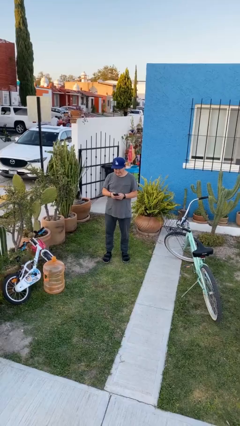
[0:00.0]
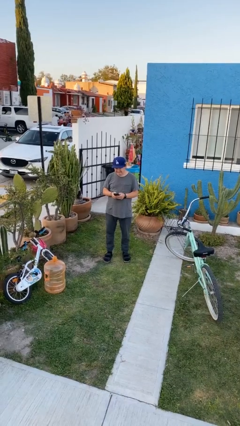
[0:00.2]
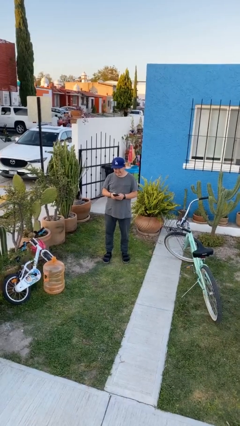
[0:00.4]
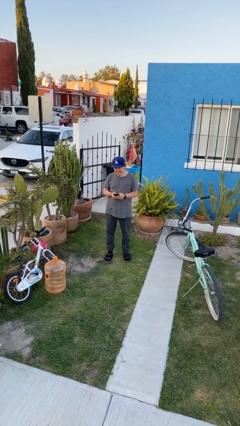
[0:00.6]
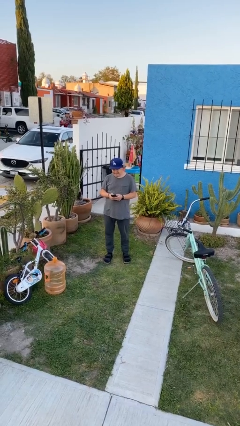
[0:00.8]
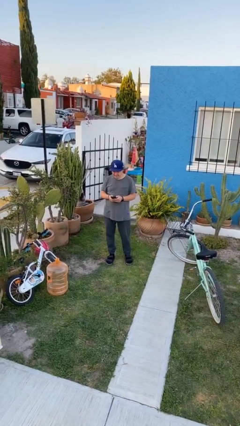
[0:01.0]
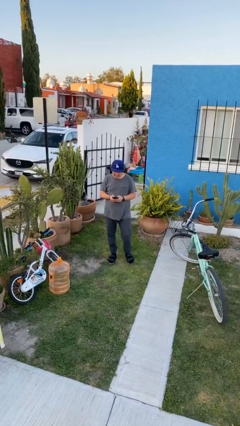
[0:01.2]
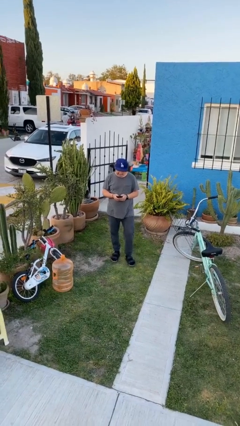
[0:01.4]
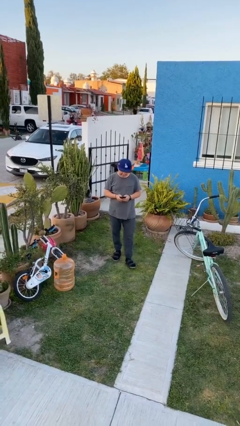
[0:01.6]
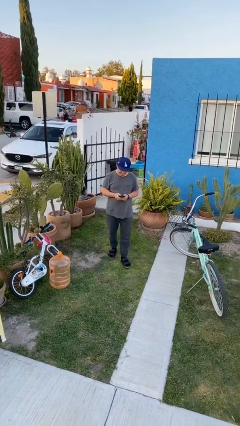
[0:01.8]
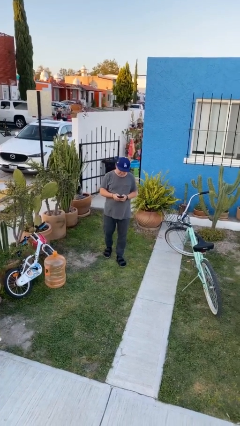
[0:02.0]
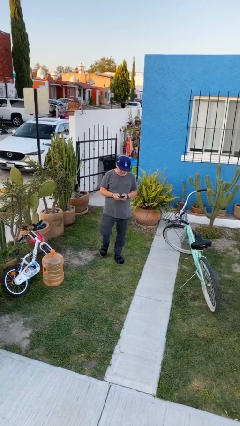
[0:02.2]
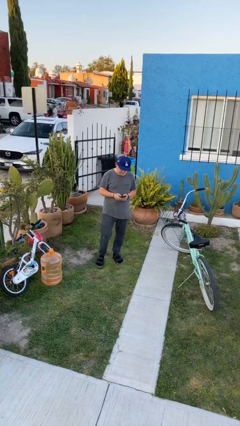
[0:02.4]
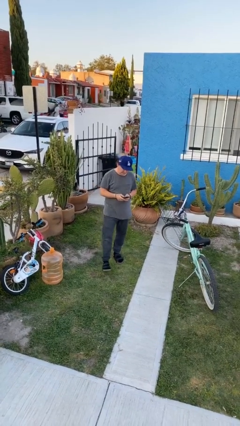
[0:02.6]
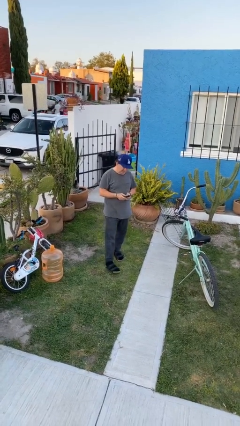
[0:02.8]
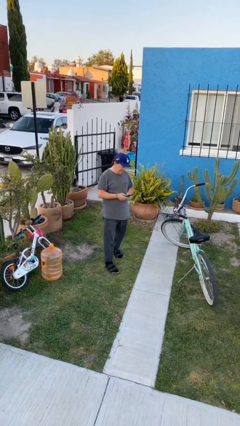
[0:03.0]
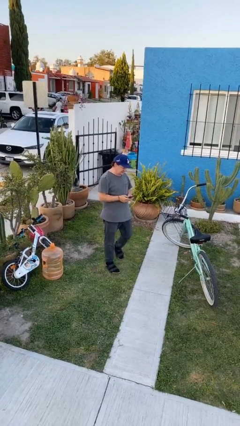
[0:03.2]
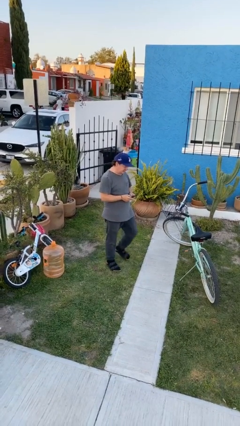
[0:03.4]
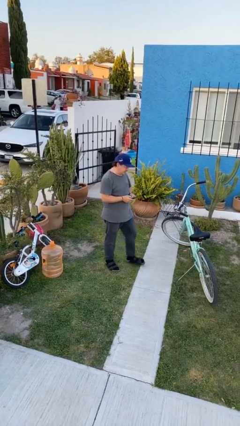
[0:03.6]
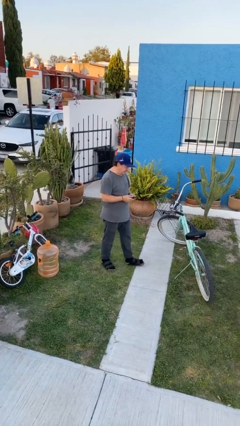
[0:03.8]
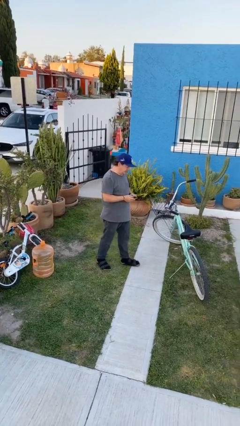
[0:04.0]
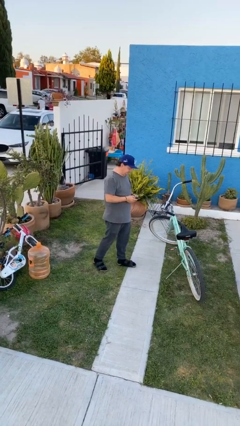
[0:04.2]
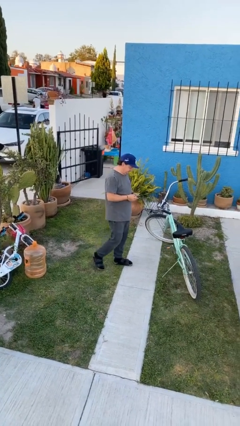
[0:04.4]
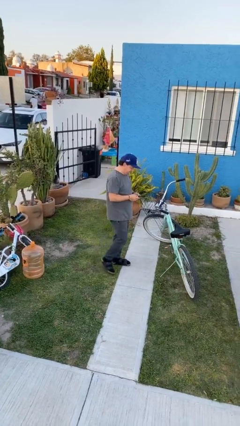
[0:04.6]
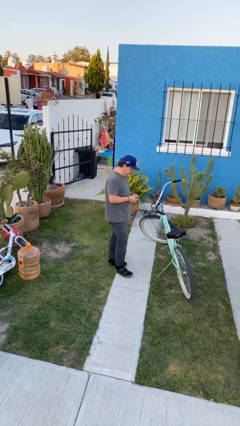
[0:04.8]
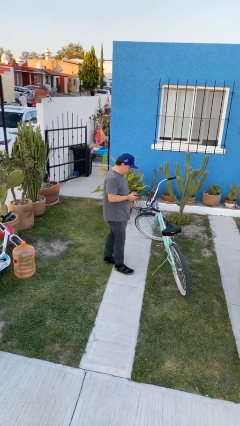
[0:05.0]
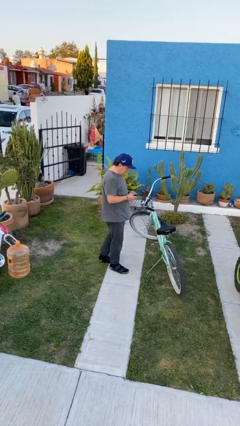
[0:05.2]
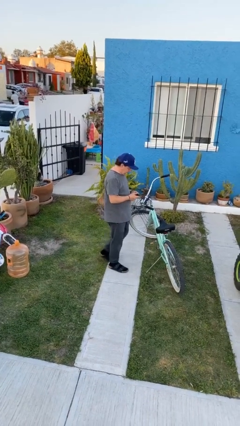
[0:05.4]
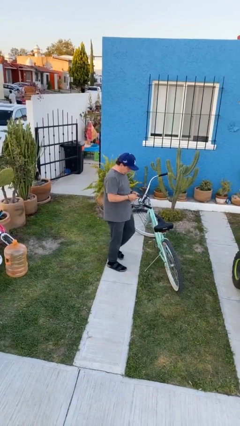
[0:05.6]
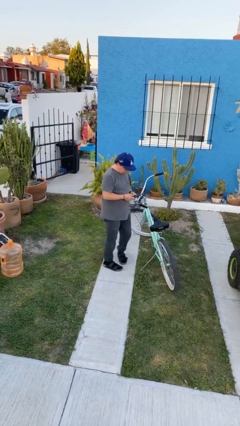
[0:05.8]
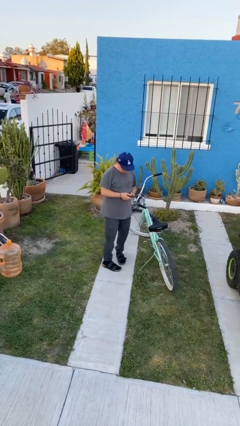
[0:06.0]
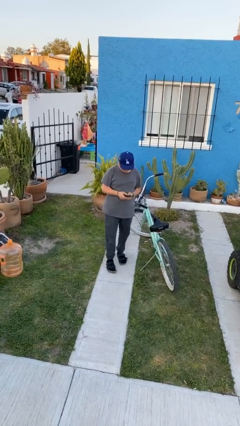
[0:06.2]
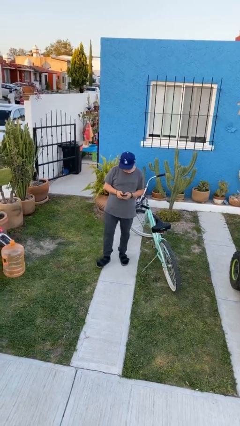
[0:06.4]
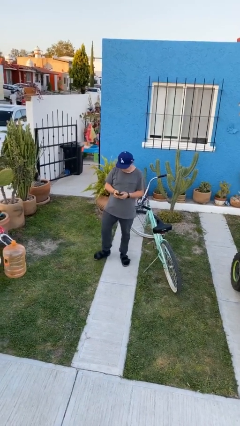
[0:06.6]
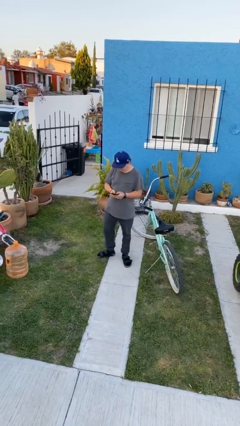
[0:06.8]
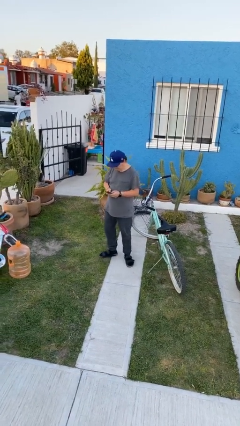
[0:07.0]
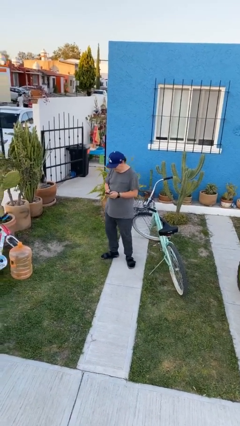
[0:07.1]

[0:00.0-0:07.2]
person texts on phone

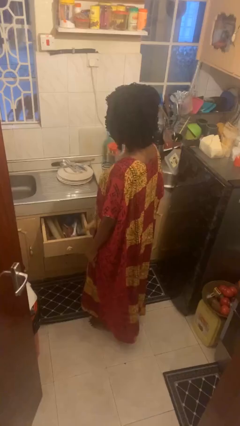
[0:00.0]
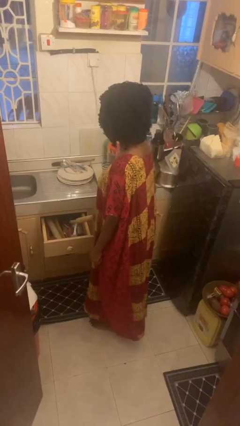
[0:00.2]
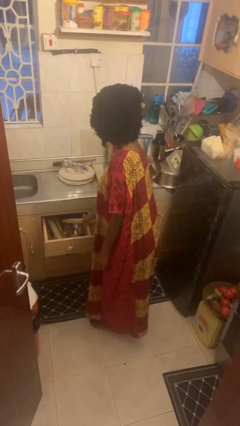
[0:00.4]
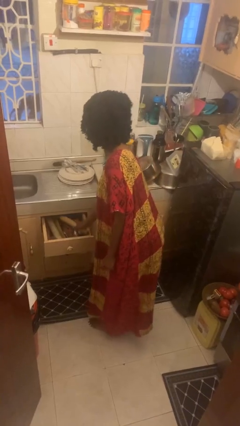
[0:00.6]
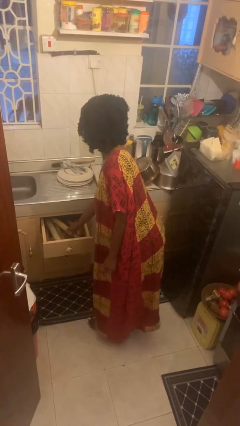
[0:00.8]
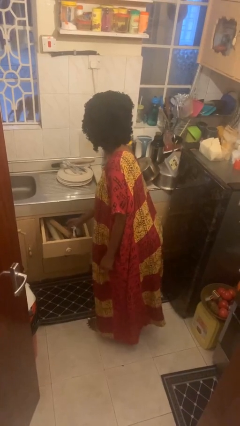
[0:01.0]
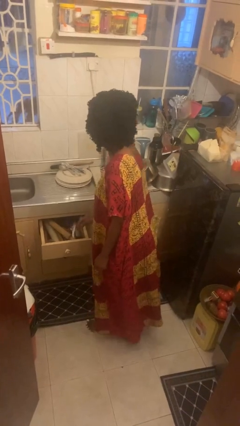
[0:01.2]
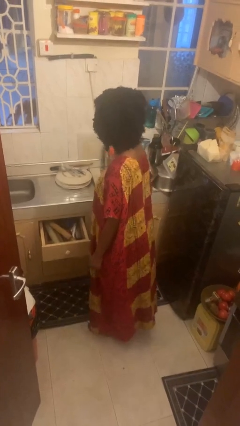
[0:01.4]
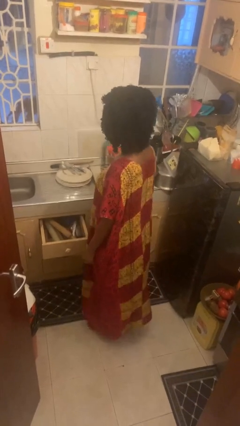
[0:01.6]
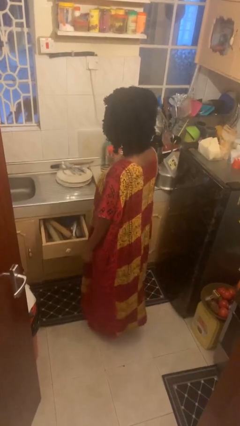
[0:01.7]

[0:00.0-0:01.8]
person puts object into kitchen drawer

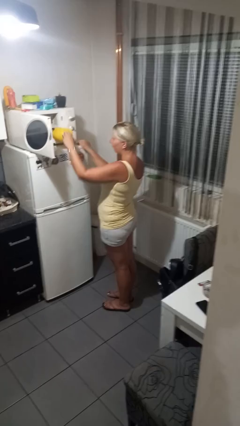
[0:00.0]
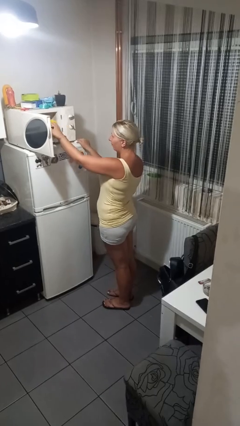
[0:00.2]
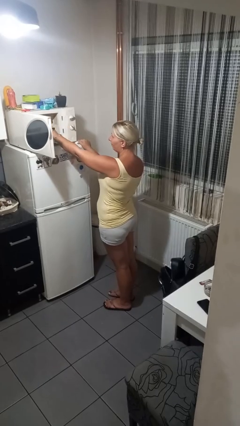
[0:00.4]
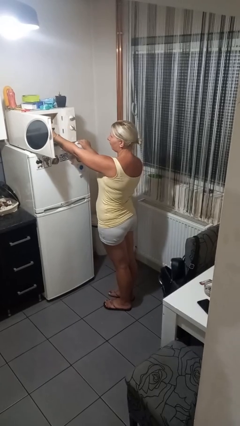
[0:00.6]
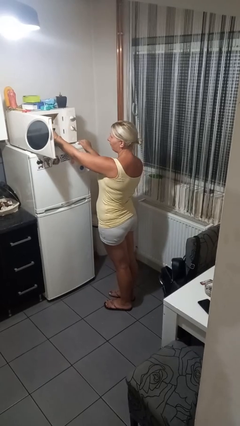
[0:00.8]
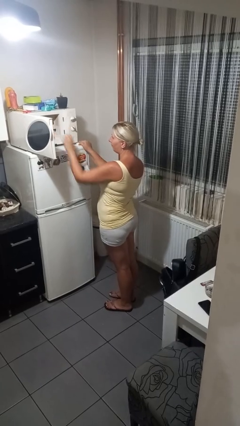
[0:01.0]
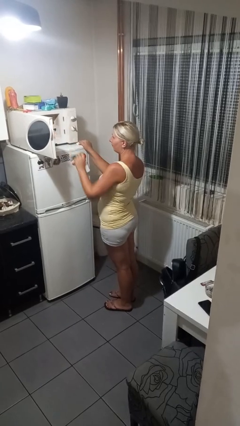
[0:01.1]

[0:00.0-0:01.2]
person puts object into microwave

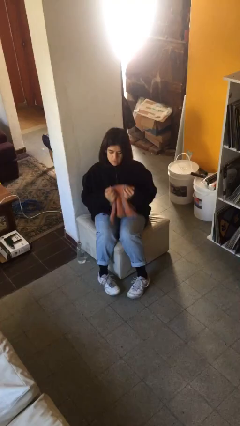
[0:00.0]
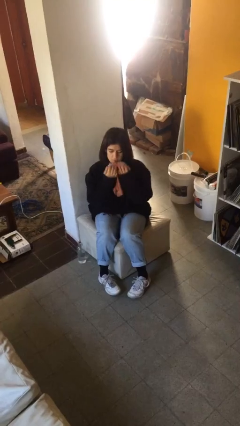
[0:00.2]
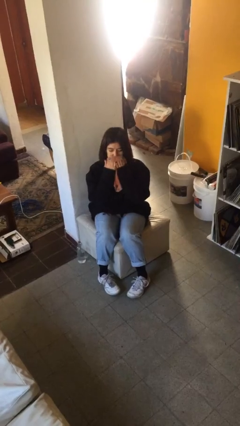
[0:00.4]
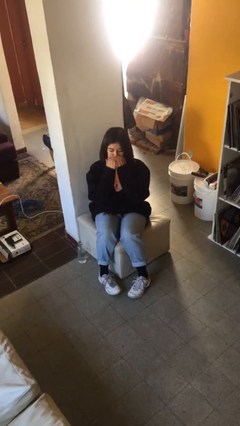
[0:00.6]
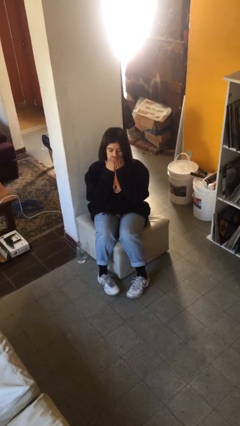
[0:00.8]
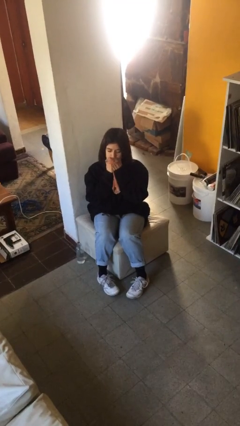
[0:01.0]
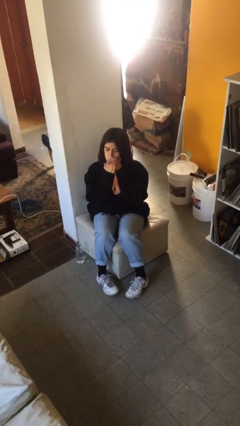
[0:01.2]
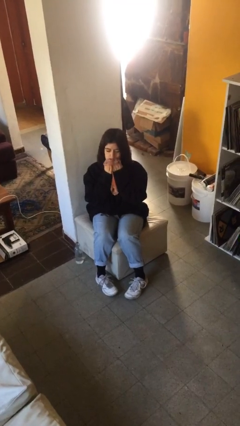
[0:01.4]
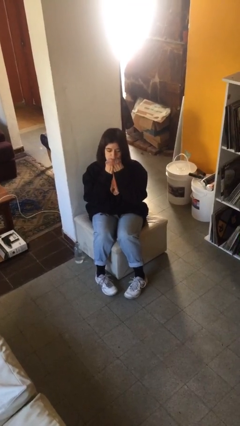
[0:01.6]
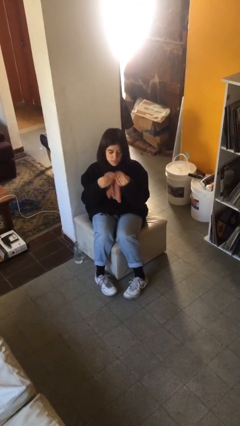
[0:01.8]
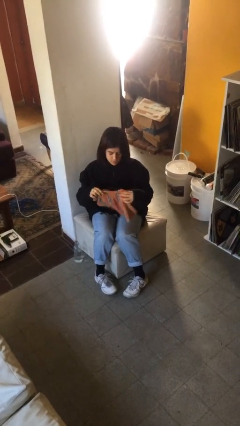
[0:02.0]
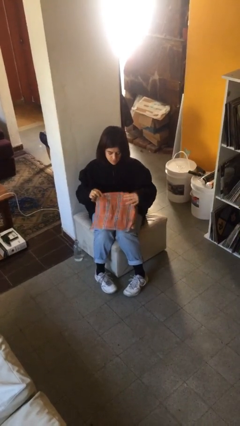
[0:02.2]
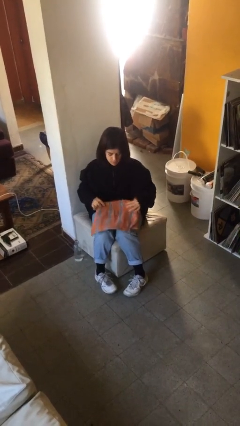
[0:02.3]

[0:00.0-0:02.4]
person wipes mouth with napkin

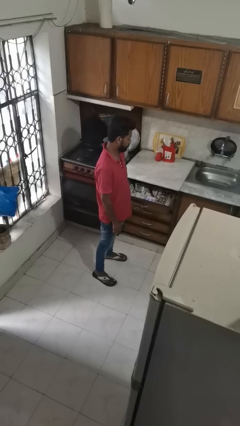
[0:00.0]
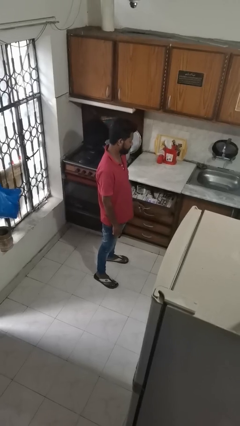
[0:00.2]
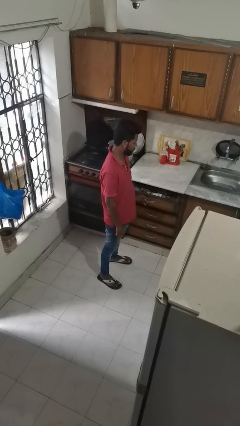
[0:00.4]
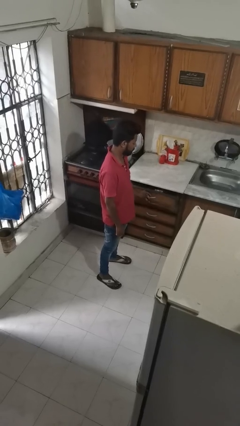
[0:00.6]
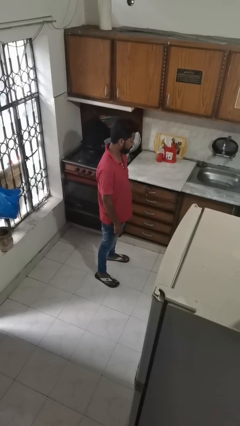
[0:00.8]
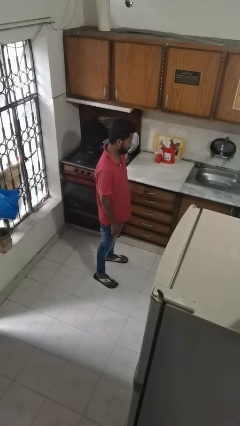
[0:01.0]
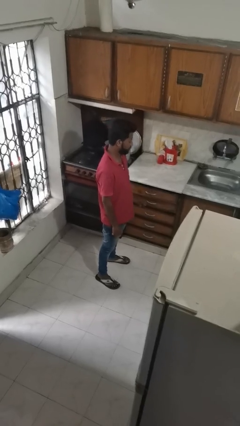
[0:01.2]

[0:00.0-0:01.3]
person closes kitchen drawer

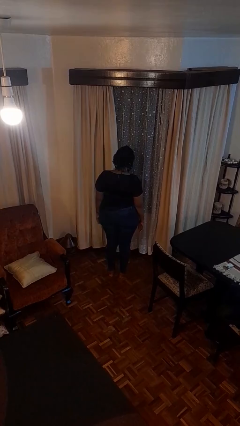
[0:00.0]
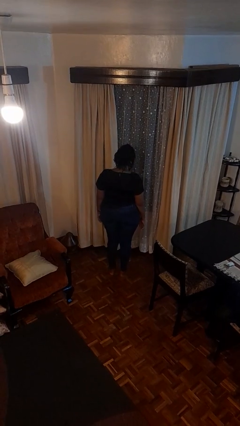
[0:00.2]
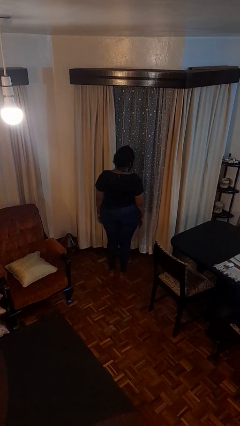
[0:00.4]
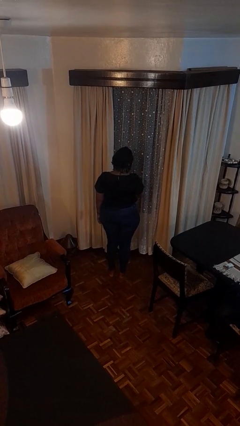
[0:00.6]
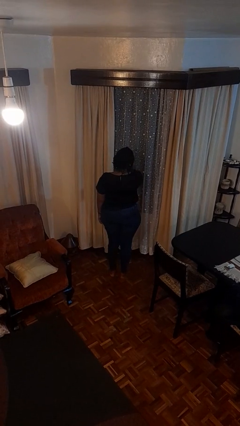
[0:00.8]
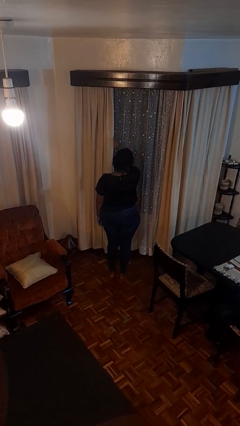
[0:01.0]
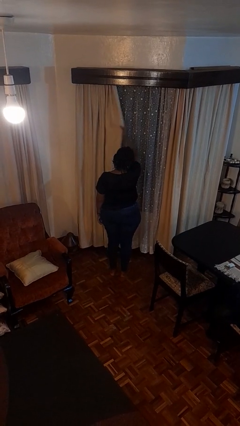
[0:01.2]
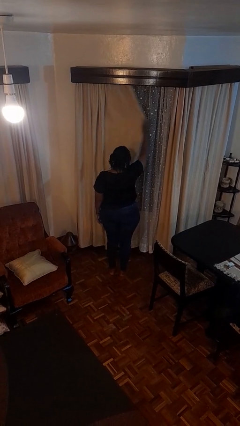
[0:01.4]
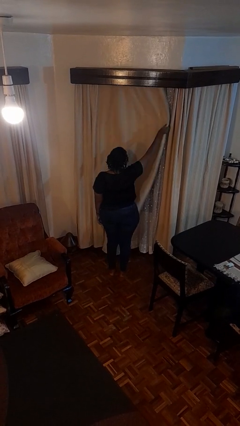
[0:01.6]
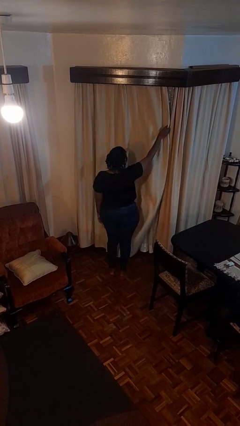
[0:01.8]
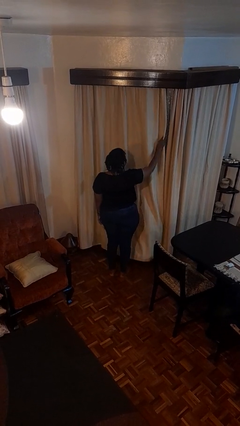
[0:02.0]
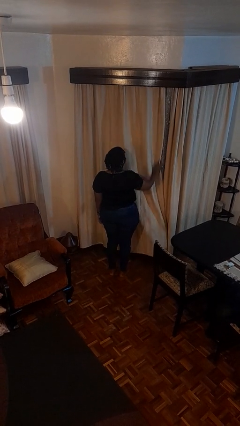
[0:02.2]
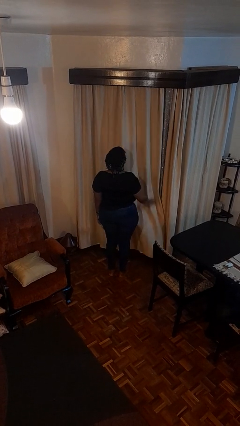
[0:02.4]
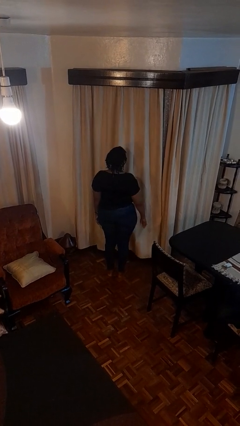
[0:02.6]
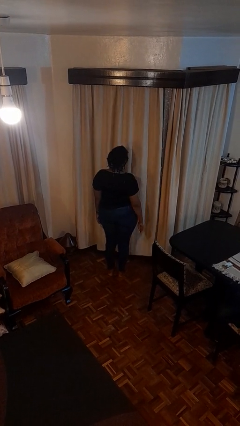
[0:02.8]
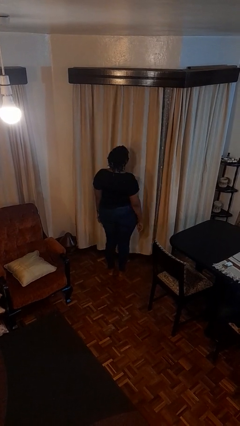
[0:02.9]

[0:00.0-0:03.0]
person closes curtains

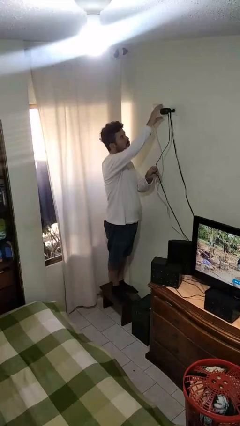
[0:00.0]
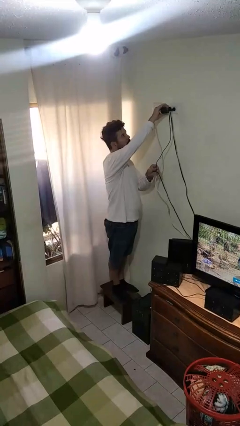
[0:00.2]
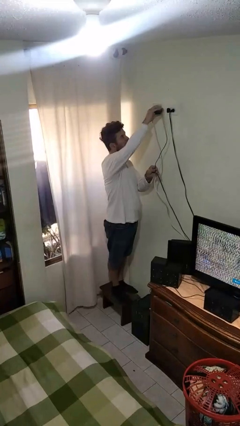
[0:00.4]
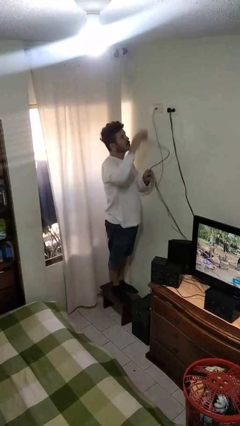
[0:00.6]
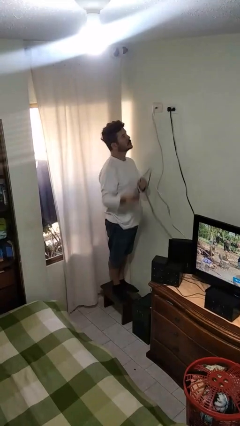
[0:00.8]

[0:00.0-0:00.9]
person unplugs from electrical socket
